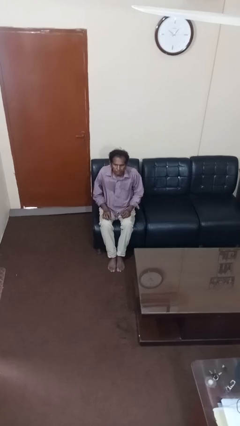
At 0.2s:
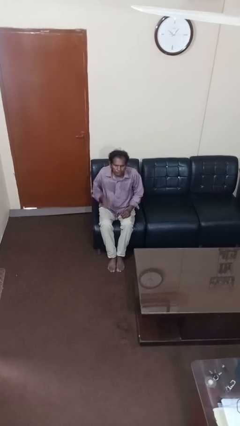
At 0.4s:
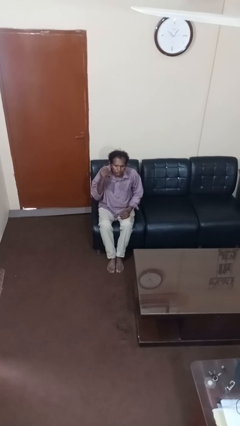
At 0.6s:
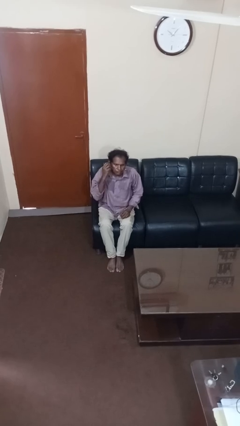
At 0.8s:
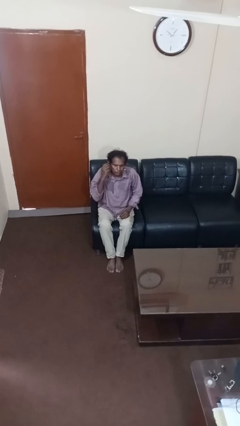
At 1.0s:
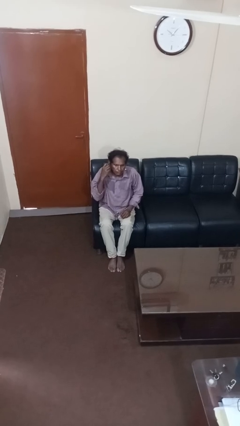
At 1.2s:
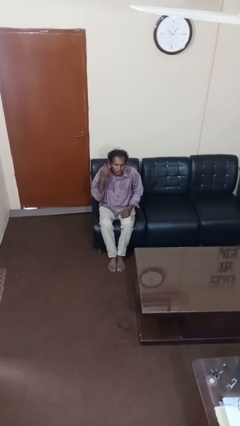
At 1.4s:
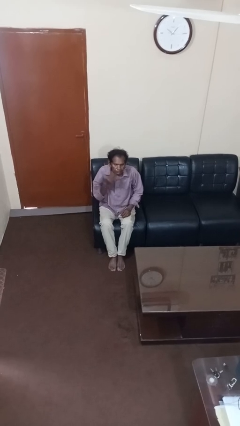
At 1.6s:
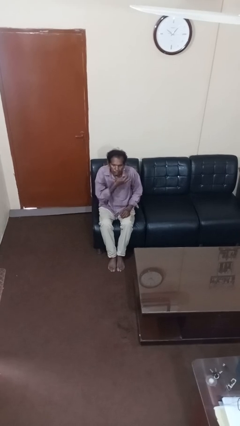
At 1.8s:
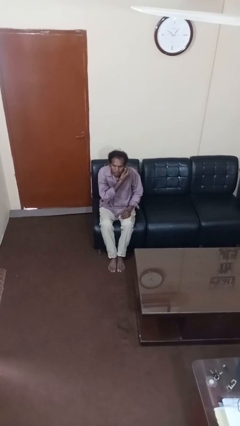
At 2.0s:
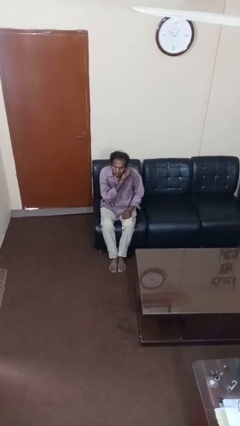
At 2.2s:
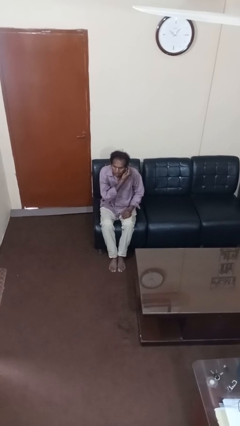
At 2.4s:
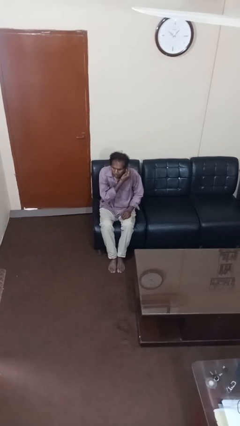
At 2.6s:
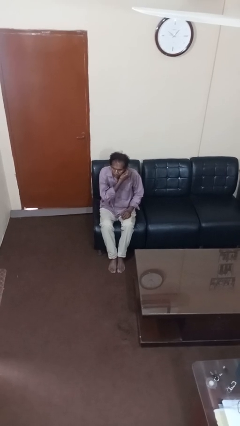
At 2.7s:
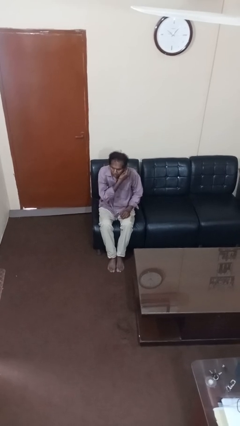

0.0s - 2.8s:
person takes off earrings

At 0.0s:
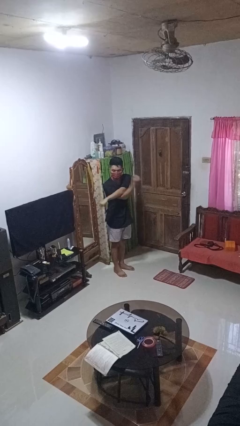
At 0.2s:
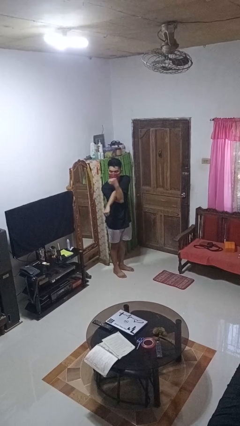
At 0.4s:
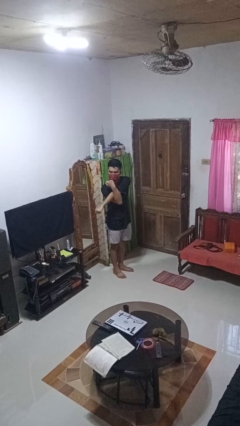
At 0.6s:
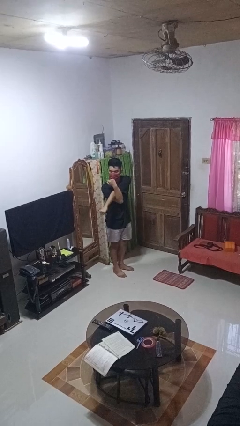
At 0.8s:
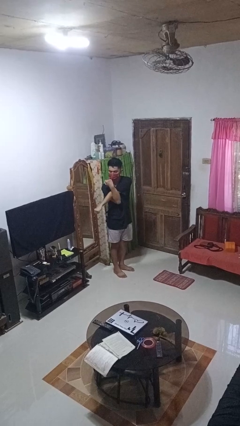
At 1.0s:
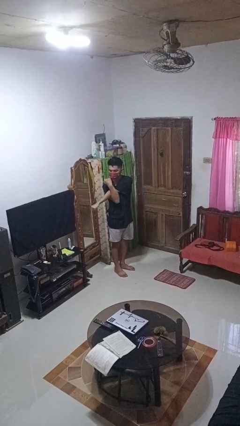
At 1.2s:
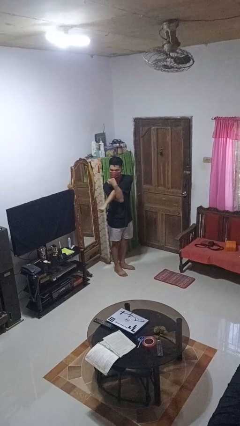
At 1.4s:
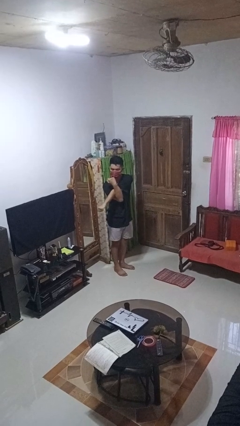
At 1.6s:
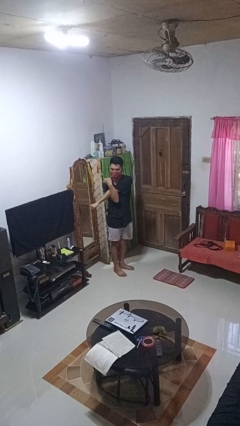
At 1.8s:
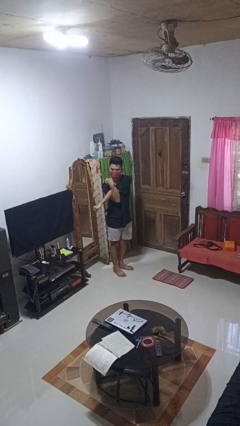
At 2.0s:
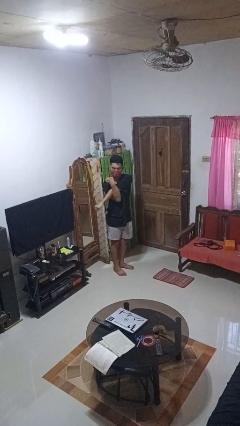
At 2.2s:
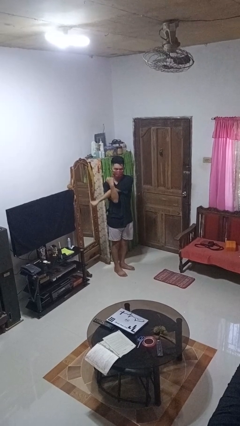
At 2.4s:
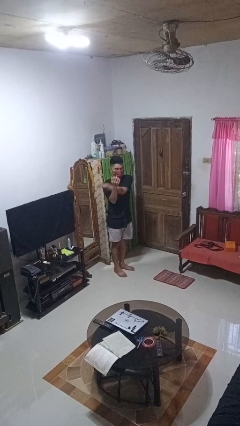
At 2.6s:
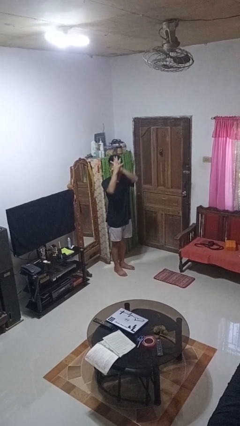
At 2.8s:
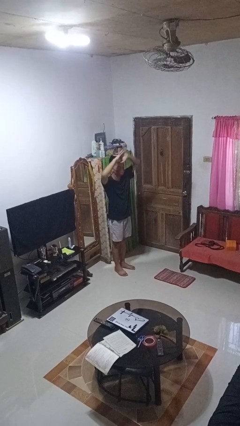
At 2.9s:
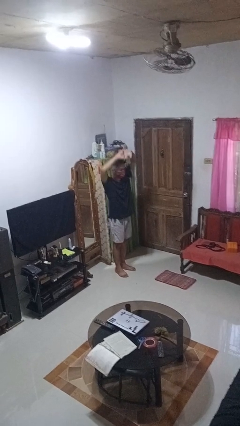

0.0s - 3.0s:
person stretches arms to side

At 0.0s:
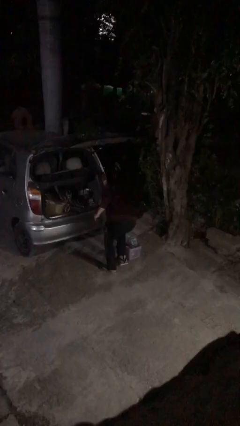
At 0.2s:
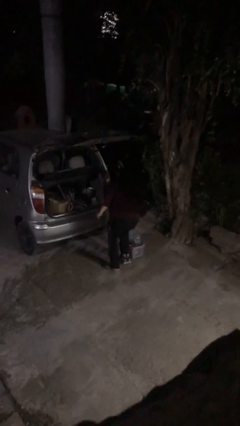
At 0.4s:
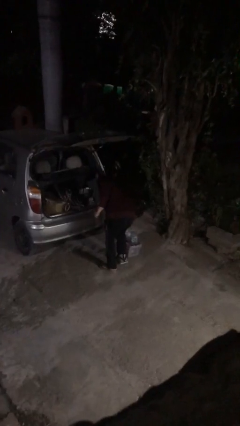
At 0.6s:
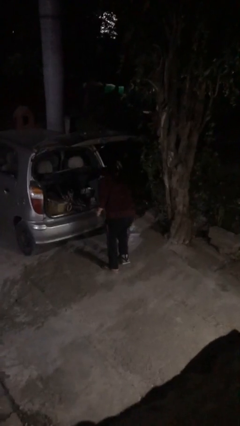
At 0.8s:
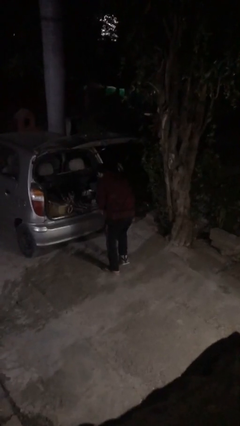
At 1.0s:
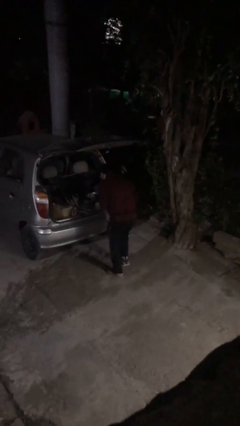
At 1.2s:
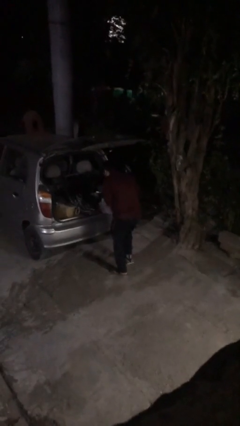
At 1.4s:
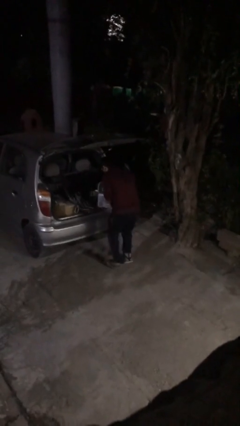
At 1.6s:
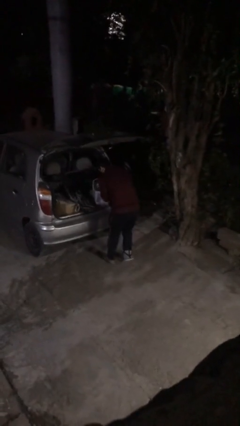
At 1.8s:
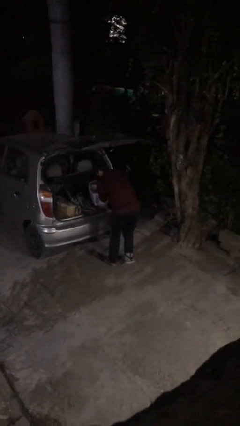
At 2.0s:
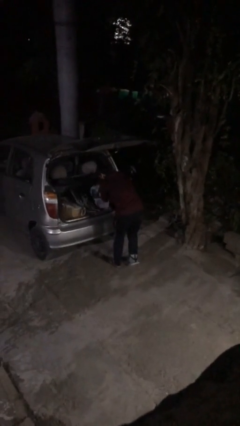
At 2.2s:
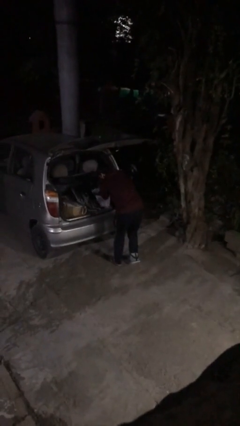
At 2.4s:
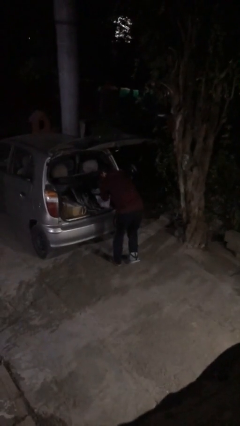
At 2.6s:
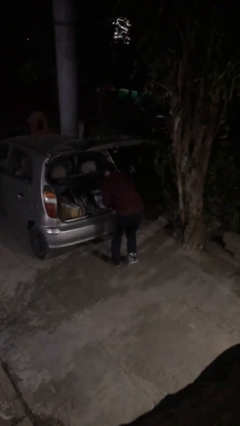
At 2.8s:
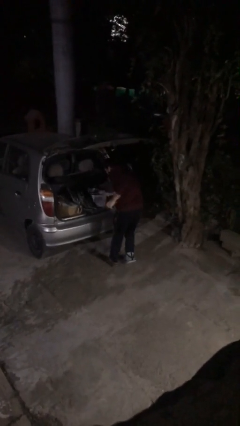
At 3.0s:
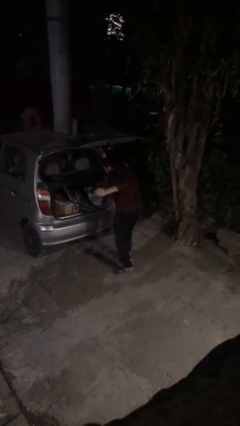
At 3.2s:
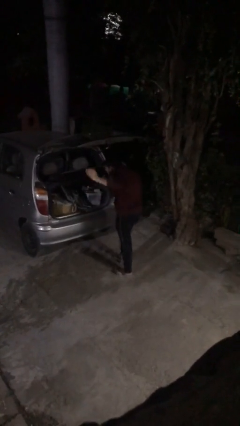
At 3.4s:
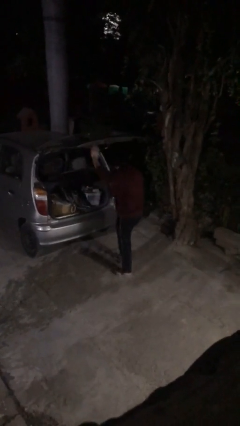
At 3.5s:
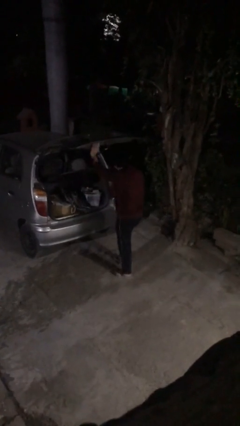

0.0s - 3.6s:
person loads car

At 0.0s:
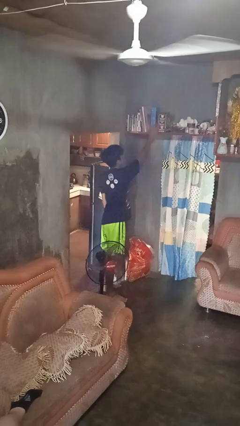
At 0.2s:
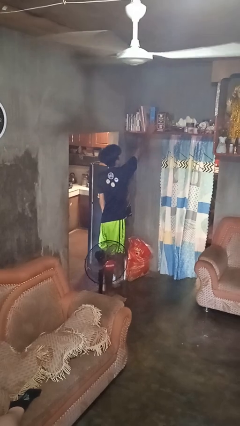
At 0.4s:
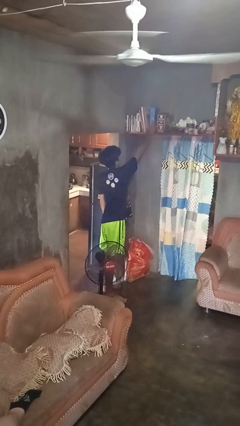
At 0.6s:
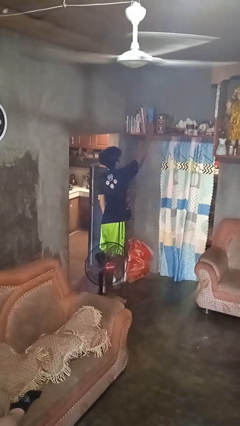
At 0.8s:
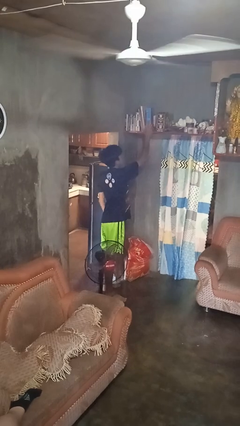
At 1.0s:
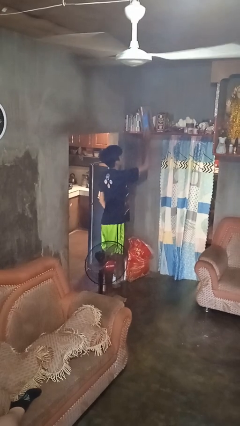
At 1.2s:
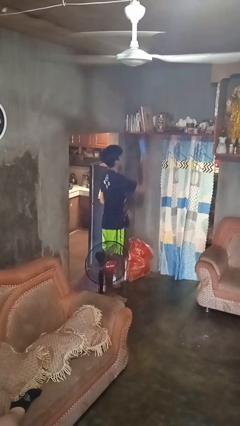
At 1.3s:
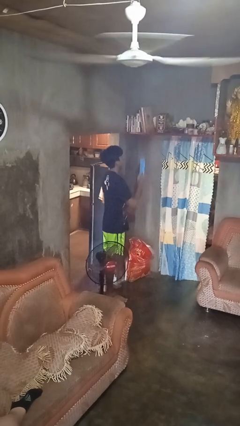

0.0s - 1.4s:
person picks up object from shelf

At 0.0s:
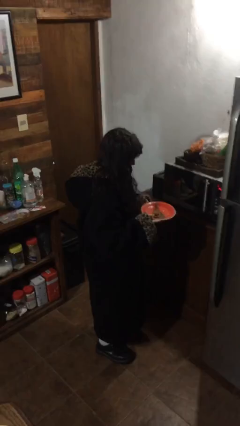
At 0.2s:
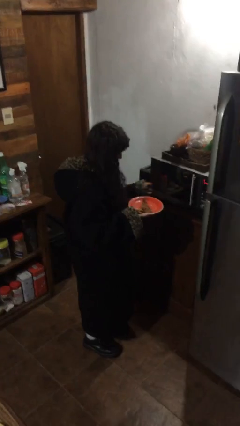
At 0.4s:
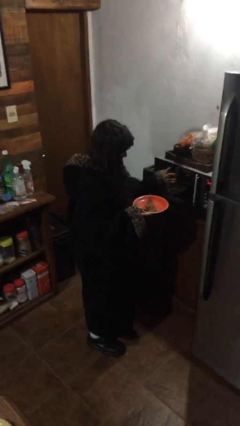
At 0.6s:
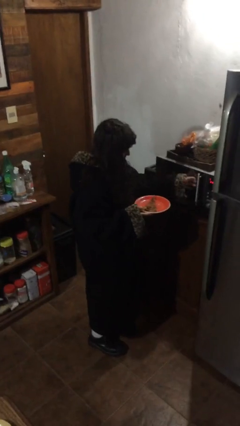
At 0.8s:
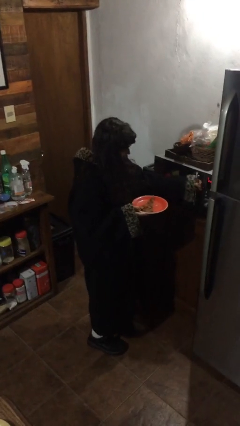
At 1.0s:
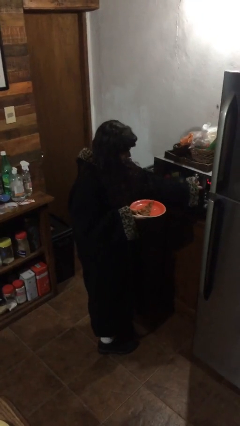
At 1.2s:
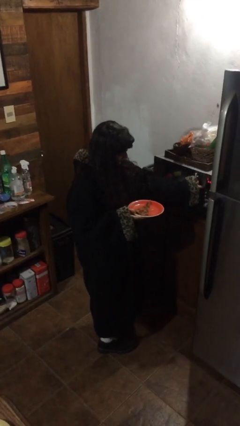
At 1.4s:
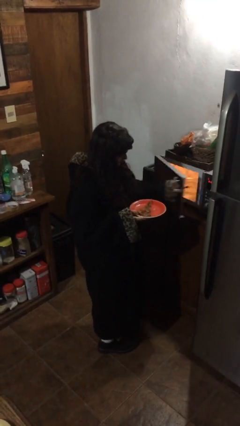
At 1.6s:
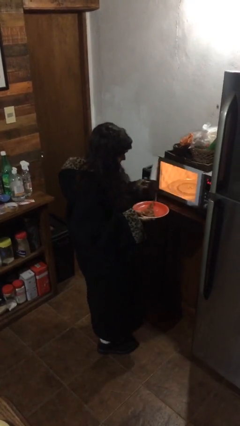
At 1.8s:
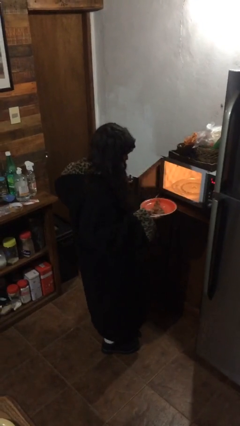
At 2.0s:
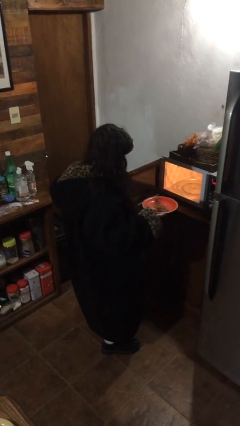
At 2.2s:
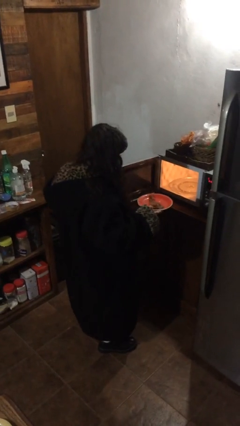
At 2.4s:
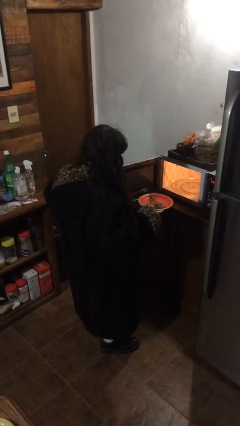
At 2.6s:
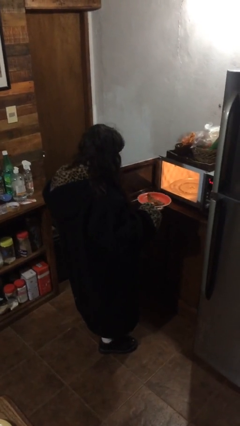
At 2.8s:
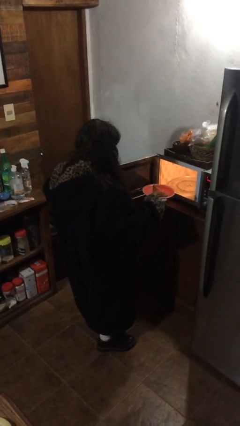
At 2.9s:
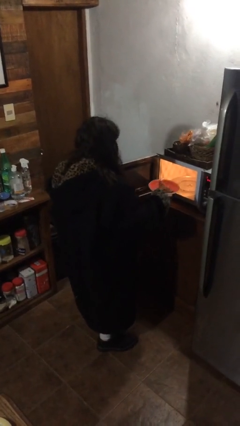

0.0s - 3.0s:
person opens microwave

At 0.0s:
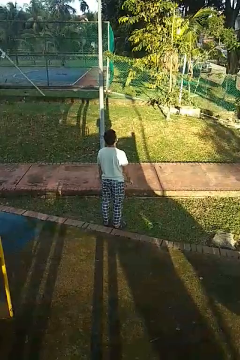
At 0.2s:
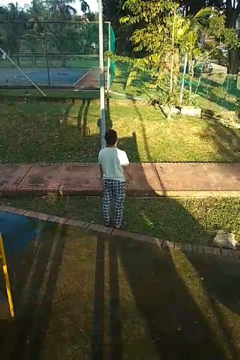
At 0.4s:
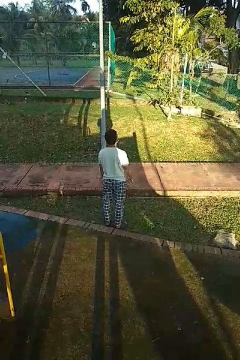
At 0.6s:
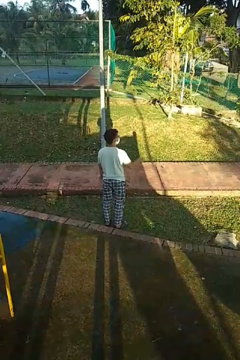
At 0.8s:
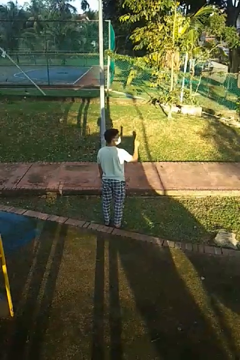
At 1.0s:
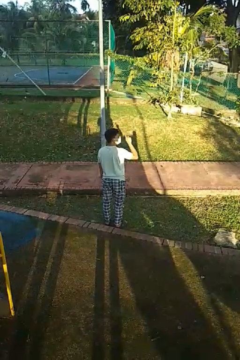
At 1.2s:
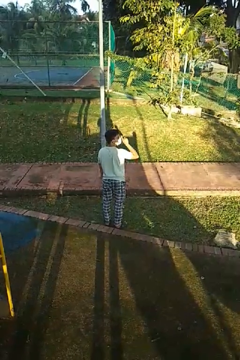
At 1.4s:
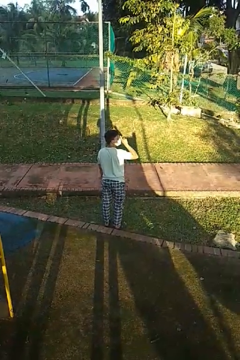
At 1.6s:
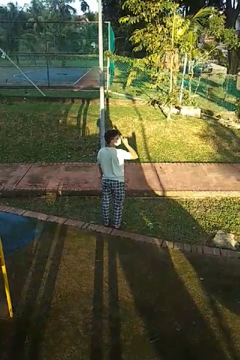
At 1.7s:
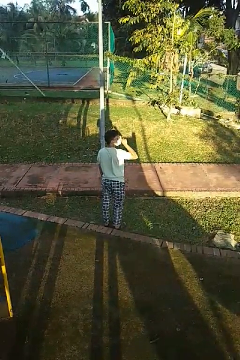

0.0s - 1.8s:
person gestures be quiet

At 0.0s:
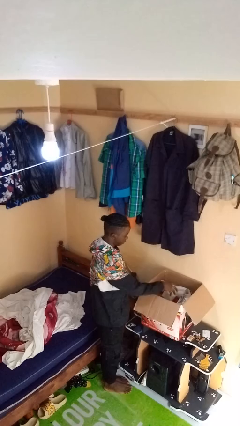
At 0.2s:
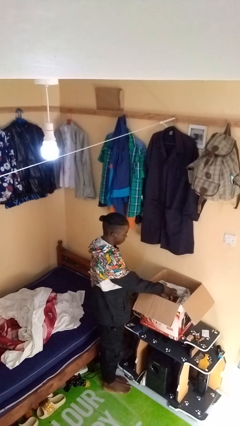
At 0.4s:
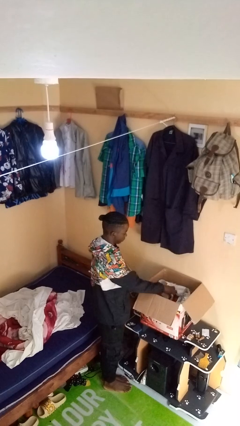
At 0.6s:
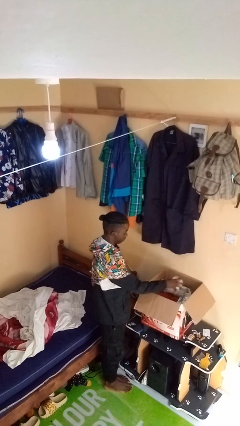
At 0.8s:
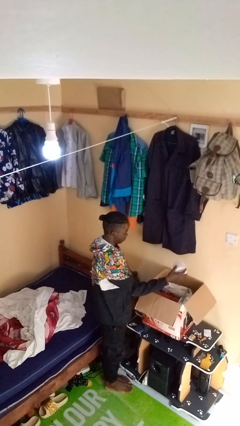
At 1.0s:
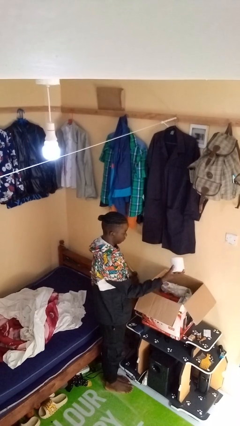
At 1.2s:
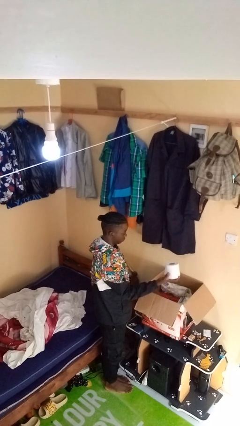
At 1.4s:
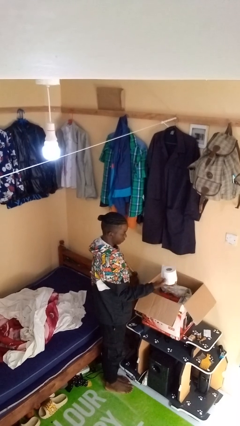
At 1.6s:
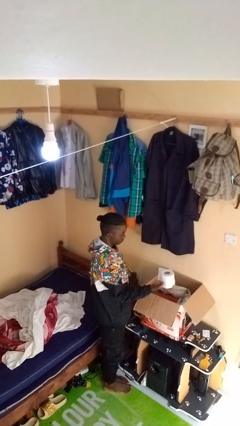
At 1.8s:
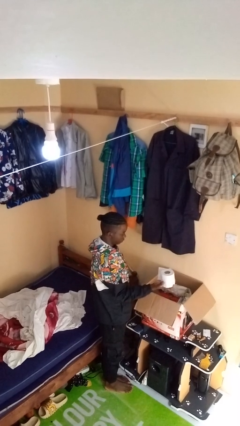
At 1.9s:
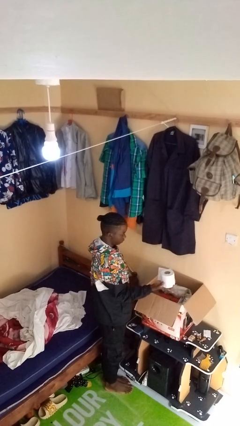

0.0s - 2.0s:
person takes object from box
